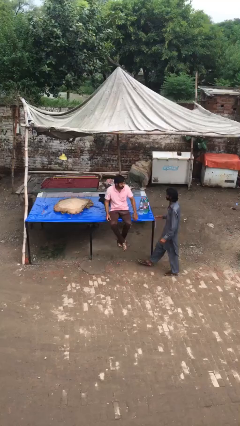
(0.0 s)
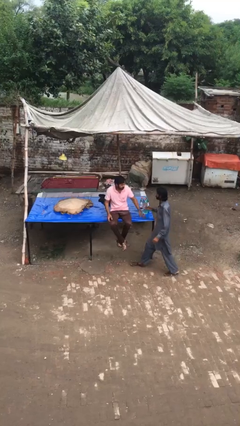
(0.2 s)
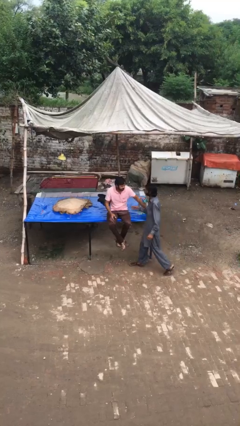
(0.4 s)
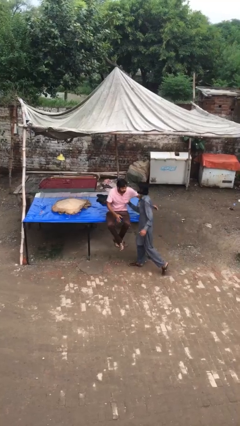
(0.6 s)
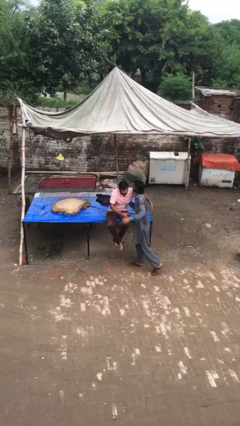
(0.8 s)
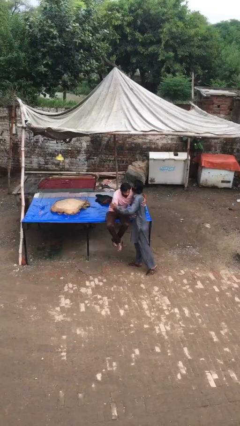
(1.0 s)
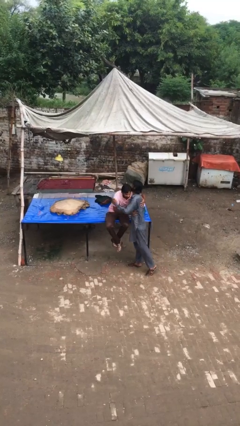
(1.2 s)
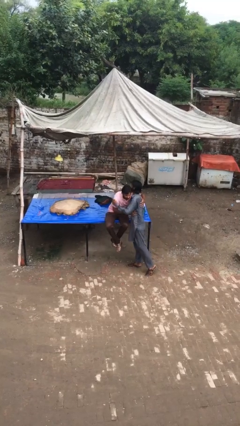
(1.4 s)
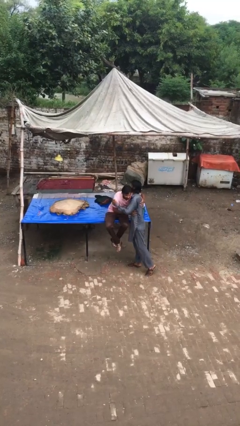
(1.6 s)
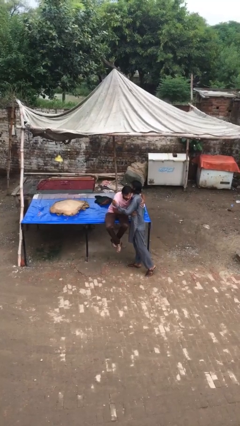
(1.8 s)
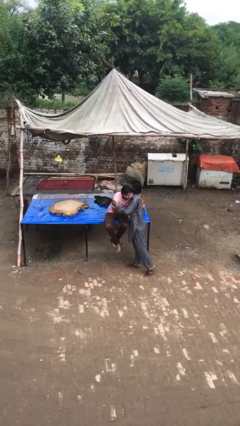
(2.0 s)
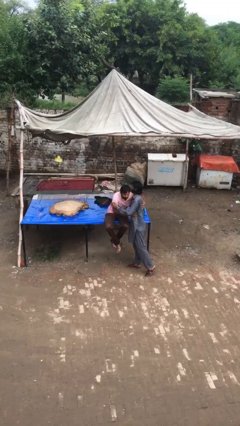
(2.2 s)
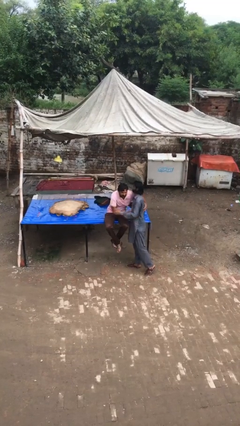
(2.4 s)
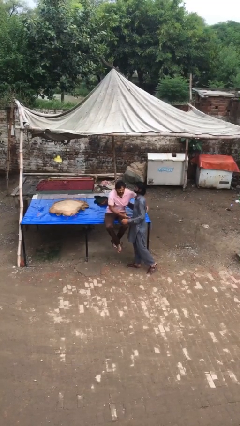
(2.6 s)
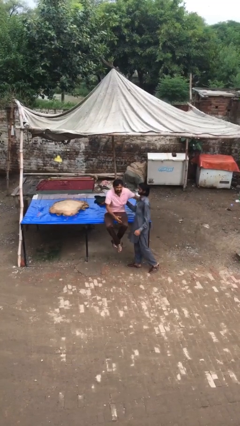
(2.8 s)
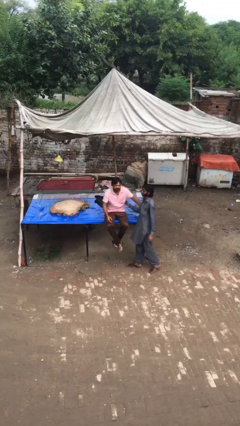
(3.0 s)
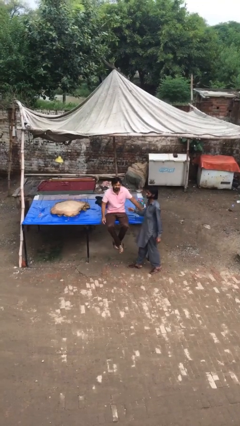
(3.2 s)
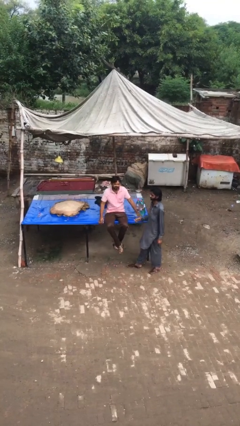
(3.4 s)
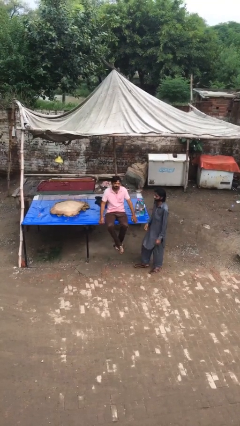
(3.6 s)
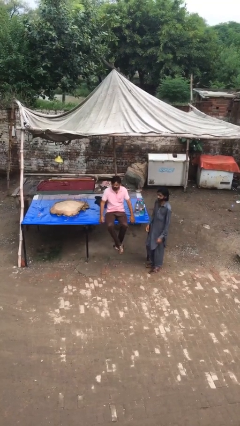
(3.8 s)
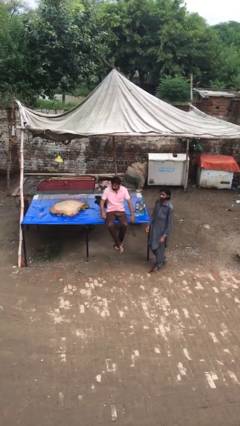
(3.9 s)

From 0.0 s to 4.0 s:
person embraces person

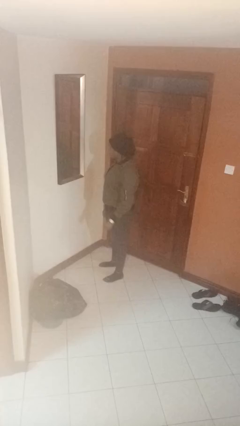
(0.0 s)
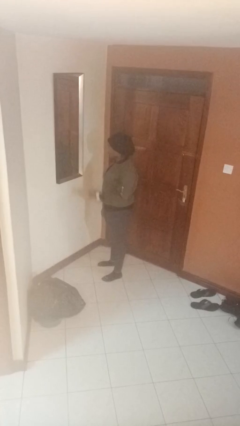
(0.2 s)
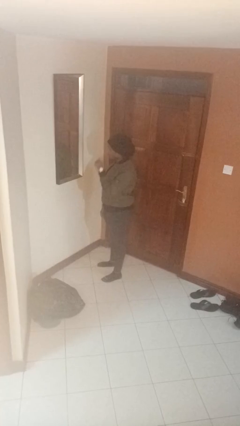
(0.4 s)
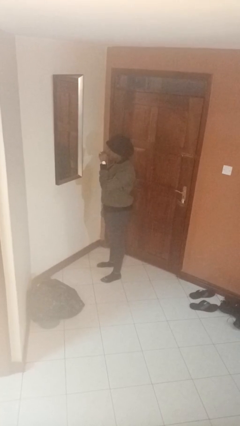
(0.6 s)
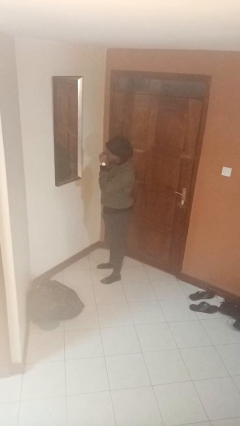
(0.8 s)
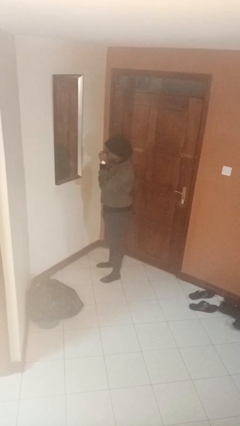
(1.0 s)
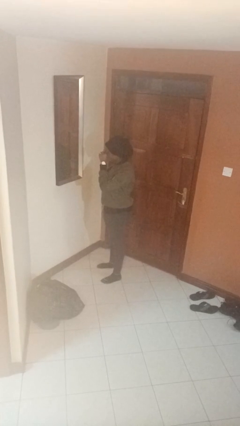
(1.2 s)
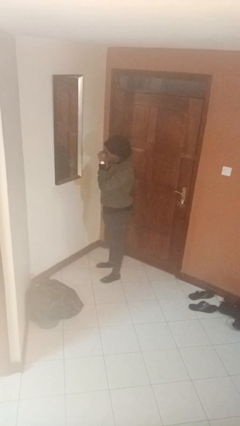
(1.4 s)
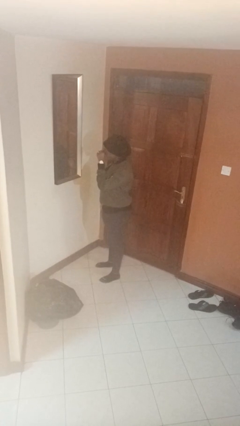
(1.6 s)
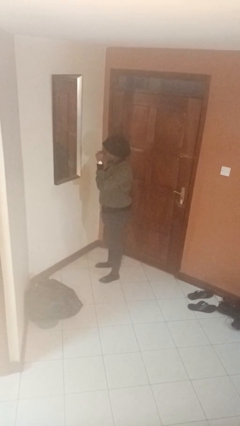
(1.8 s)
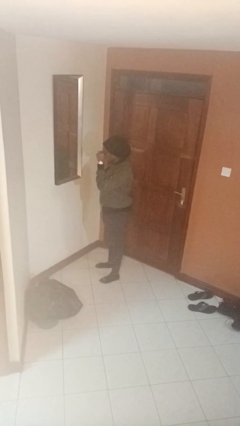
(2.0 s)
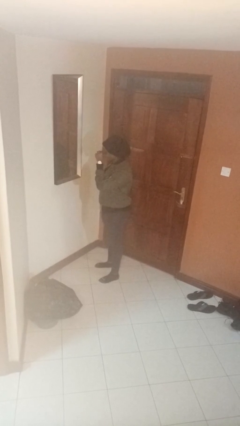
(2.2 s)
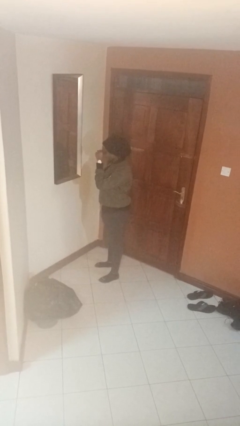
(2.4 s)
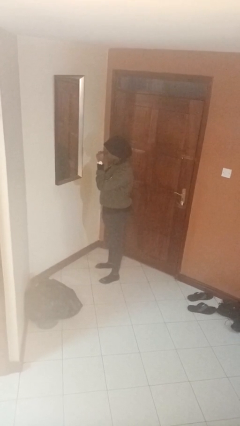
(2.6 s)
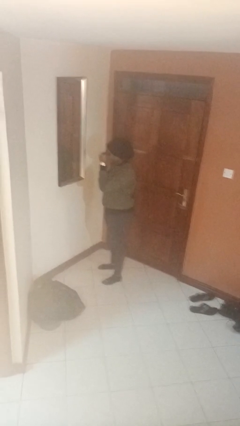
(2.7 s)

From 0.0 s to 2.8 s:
person applies eye makeup

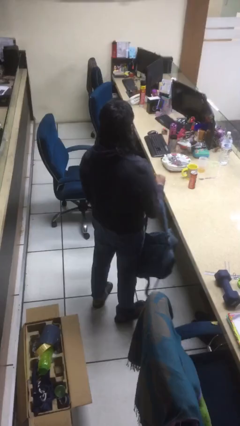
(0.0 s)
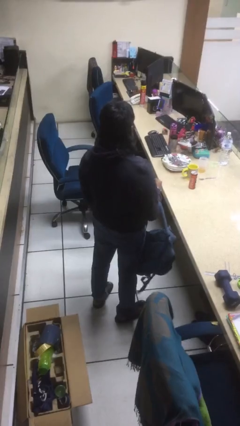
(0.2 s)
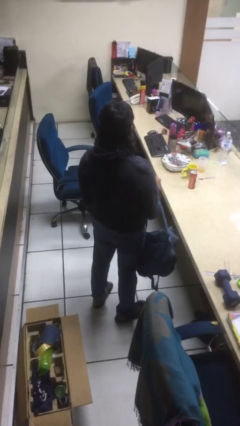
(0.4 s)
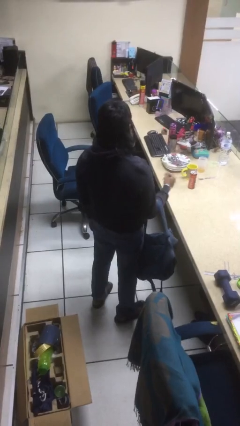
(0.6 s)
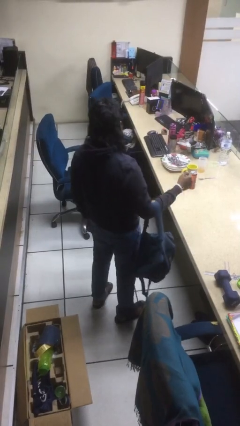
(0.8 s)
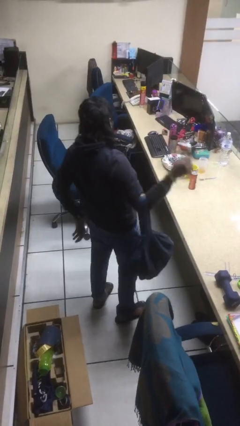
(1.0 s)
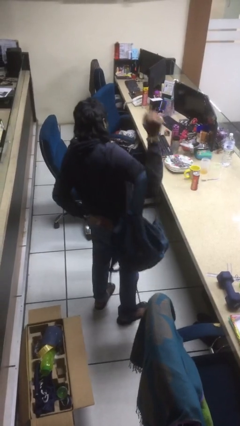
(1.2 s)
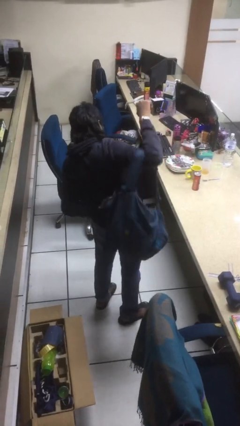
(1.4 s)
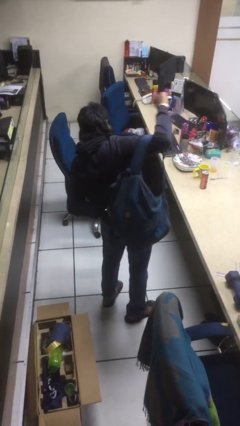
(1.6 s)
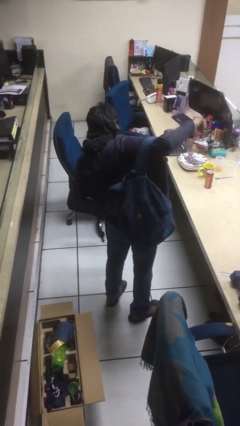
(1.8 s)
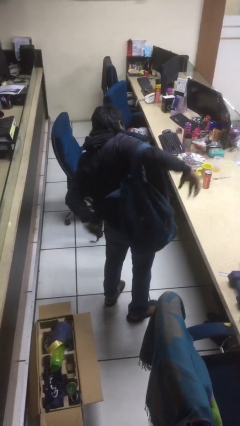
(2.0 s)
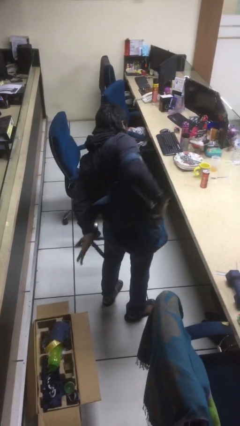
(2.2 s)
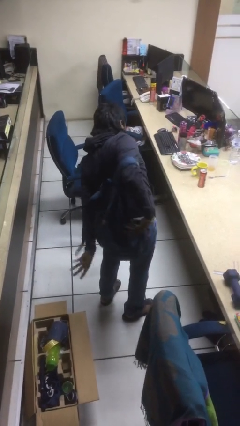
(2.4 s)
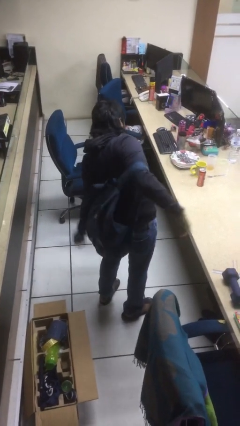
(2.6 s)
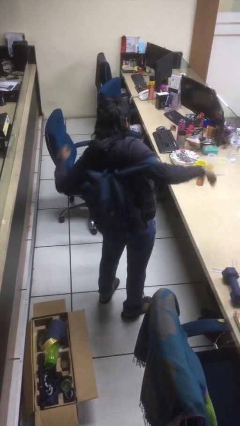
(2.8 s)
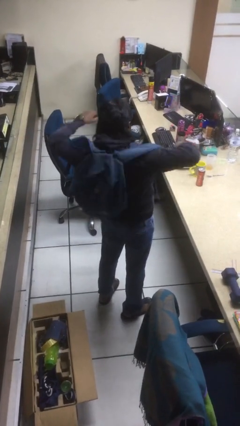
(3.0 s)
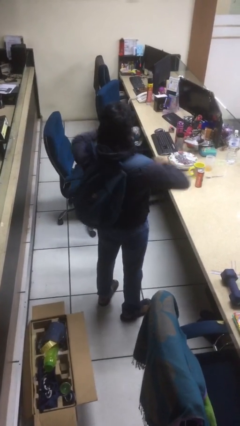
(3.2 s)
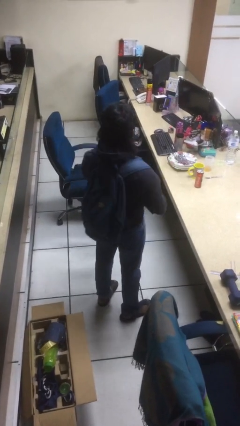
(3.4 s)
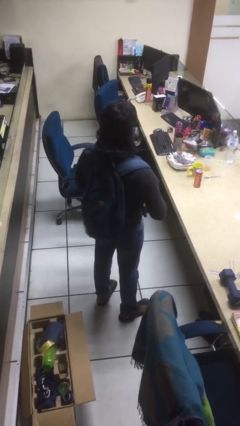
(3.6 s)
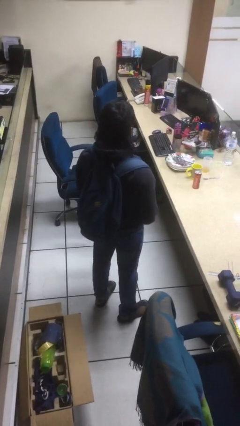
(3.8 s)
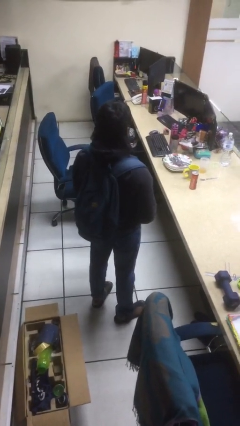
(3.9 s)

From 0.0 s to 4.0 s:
person puts on backpack

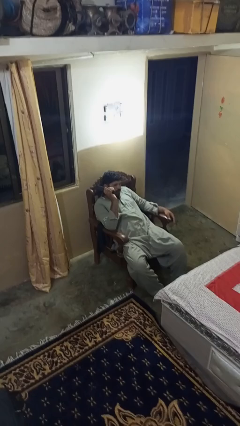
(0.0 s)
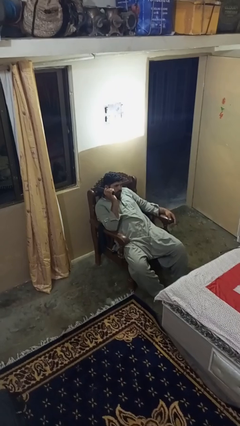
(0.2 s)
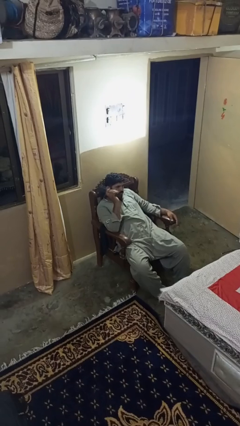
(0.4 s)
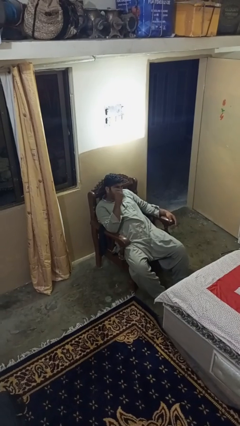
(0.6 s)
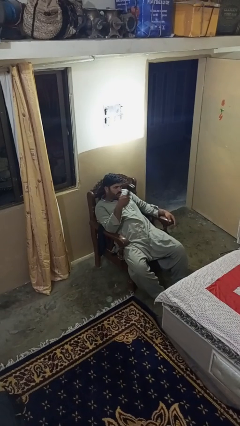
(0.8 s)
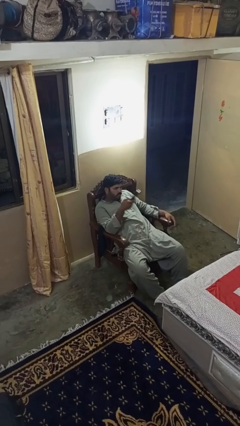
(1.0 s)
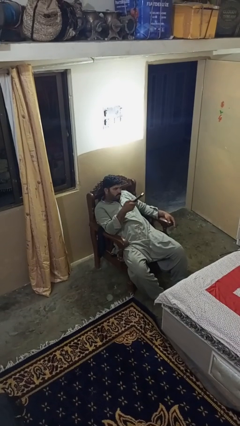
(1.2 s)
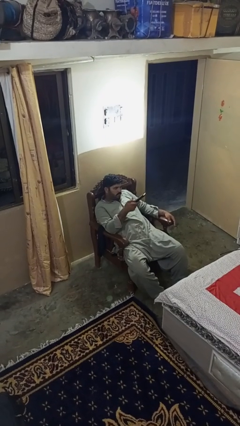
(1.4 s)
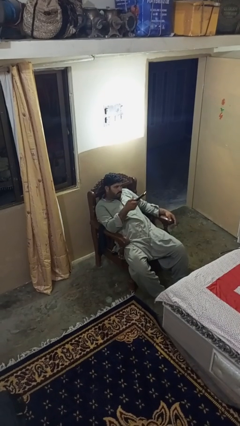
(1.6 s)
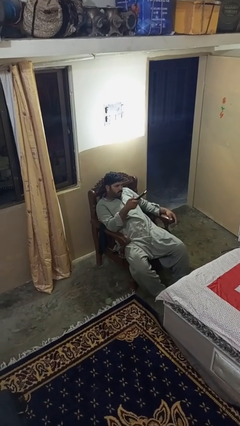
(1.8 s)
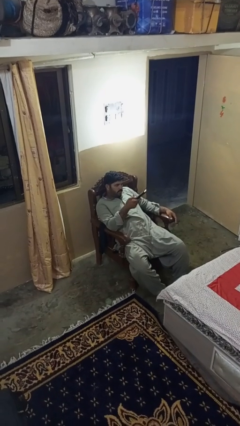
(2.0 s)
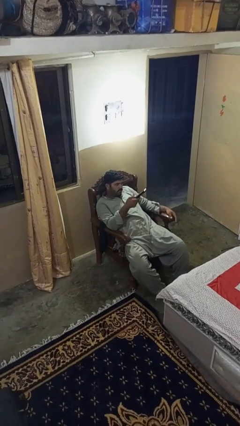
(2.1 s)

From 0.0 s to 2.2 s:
person uses television remote

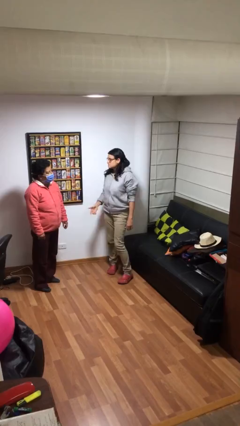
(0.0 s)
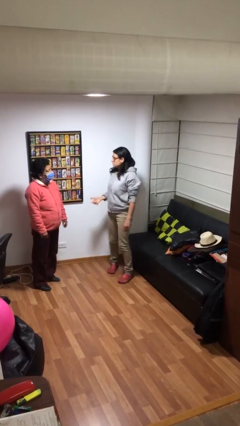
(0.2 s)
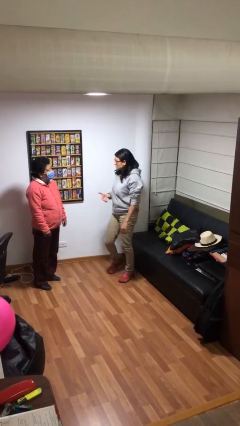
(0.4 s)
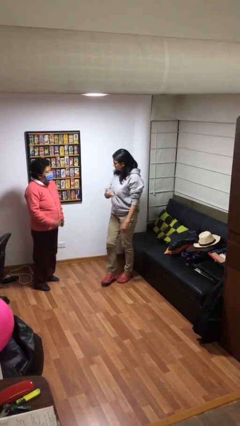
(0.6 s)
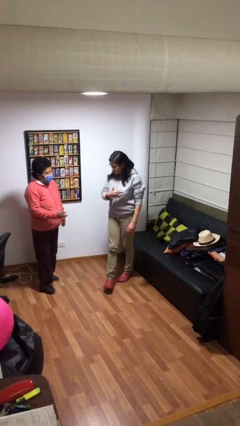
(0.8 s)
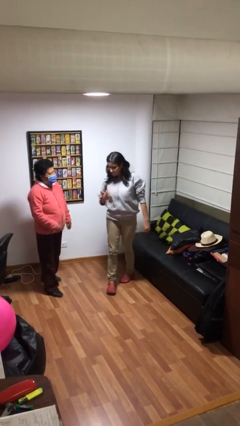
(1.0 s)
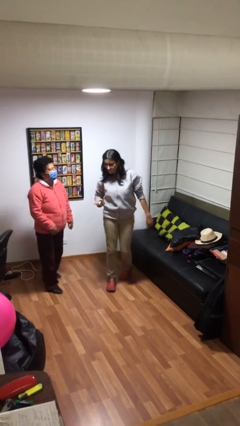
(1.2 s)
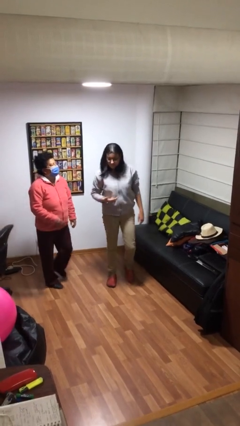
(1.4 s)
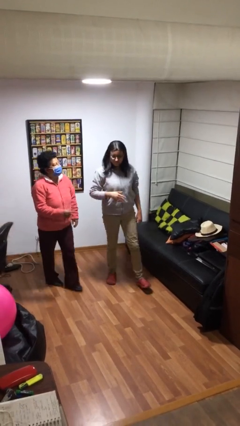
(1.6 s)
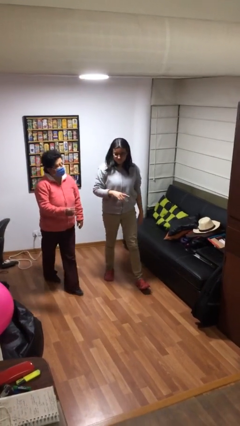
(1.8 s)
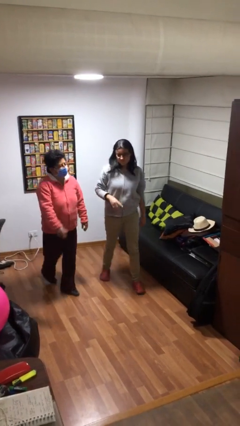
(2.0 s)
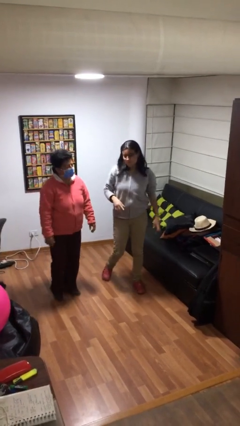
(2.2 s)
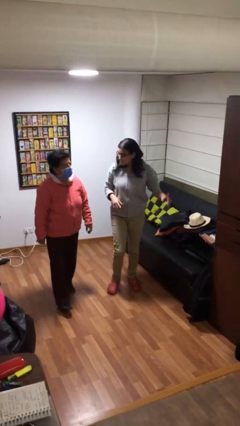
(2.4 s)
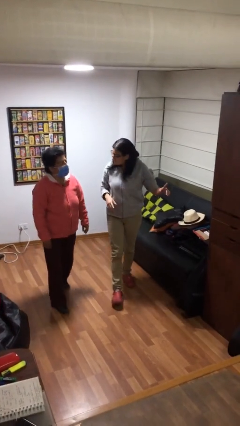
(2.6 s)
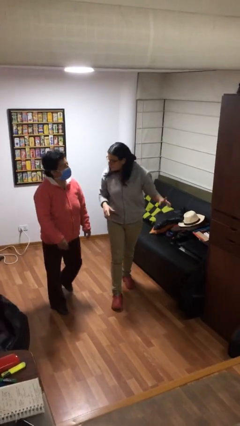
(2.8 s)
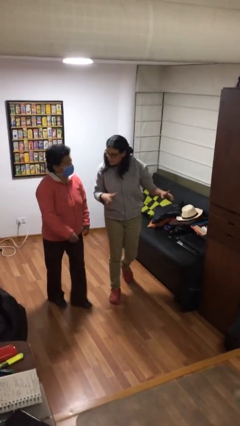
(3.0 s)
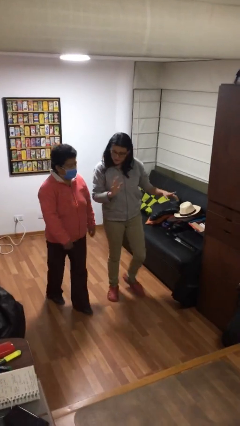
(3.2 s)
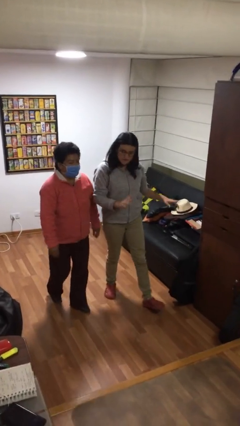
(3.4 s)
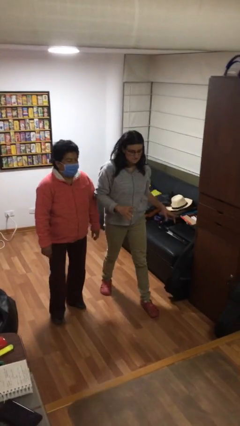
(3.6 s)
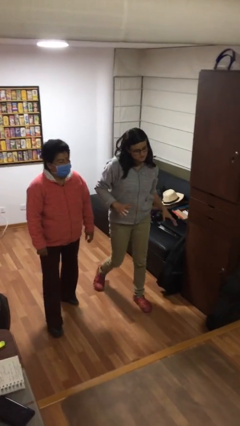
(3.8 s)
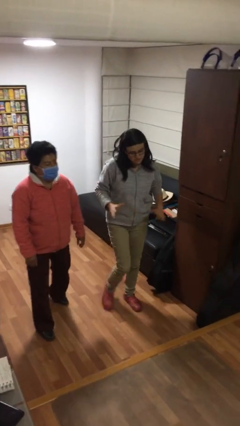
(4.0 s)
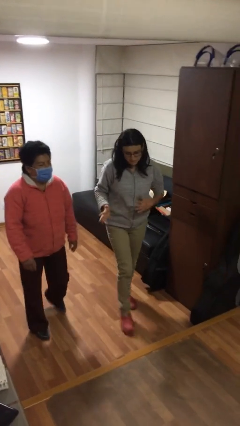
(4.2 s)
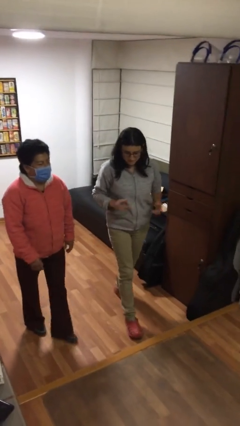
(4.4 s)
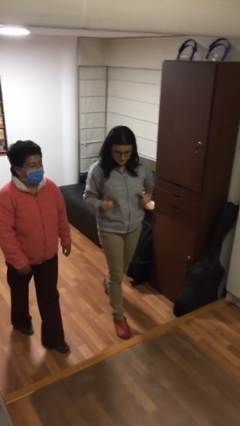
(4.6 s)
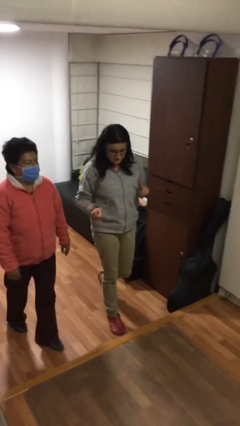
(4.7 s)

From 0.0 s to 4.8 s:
person talks to person
